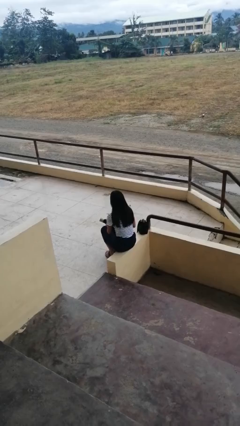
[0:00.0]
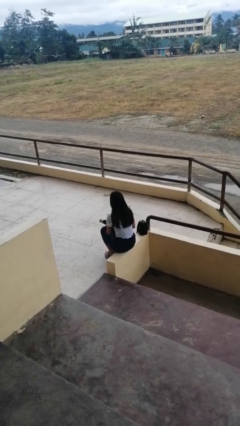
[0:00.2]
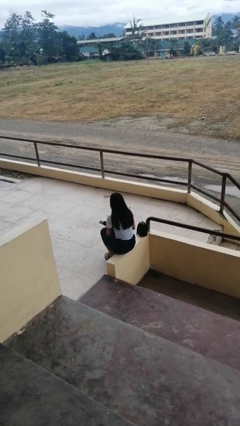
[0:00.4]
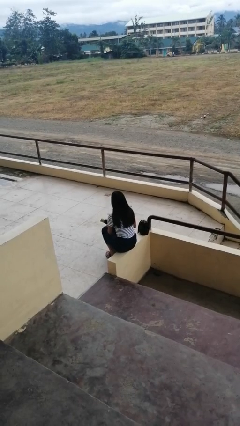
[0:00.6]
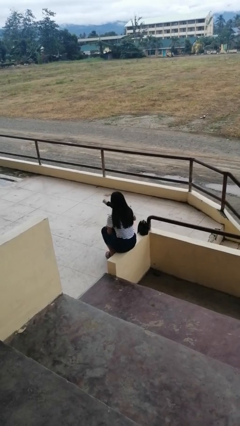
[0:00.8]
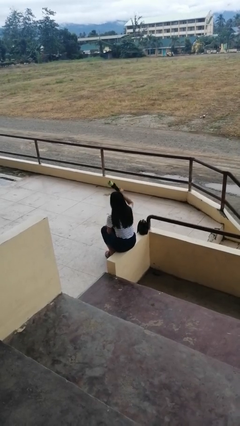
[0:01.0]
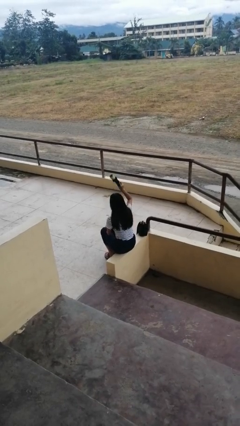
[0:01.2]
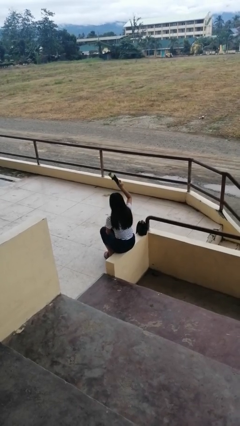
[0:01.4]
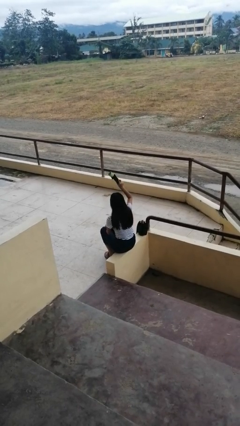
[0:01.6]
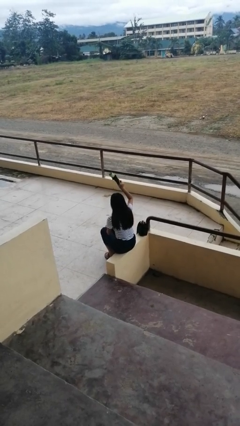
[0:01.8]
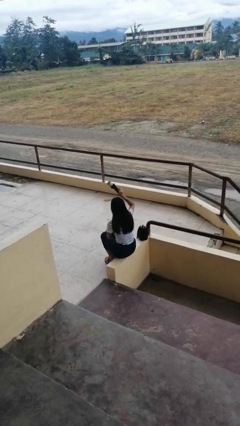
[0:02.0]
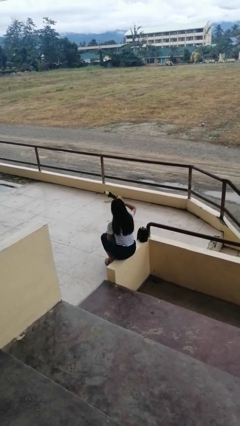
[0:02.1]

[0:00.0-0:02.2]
person holds object above head

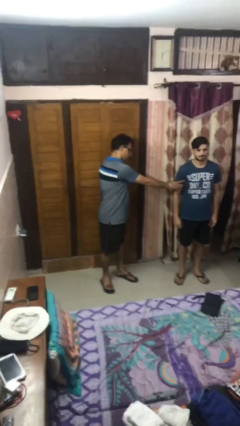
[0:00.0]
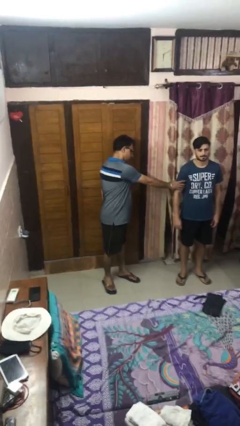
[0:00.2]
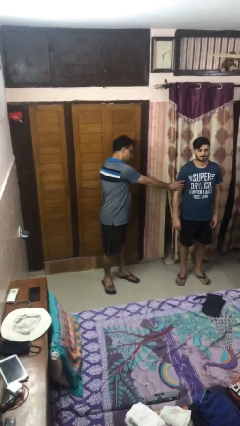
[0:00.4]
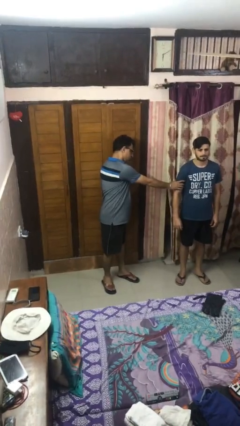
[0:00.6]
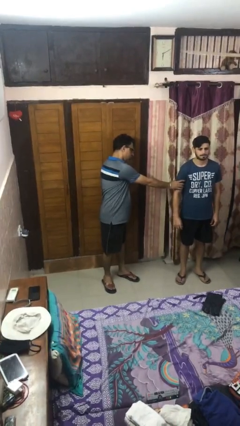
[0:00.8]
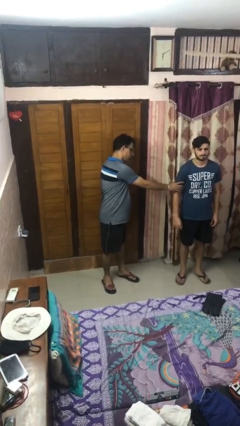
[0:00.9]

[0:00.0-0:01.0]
person grabs person by bicep

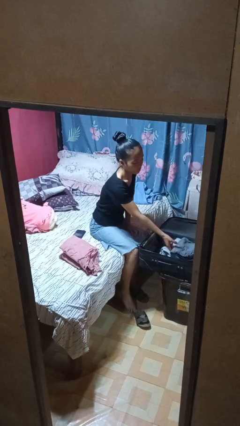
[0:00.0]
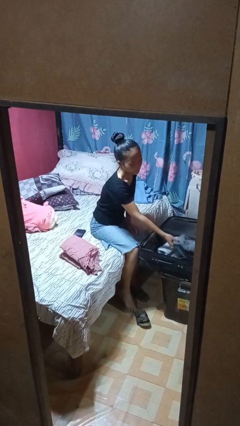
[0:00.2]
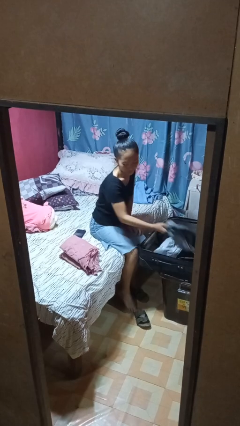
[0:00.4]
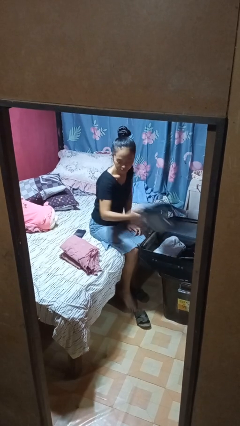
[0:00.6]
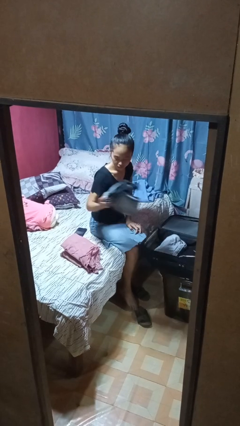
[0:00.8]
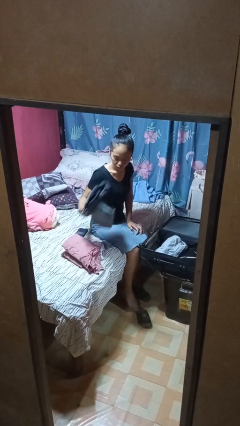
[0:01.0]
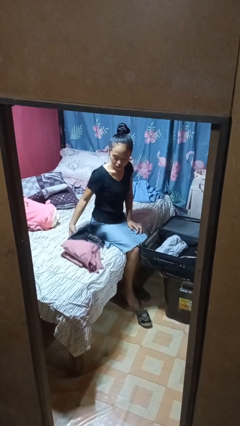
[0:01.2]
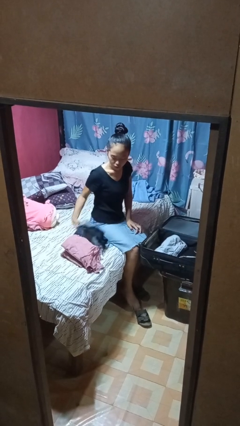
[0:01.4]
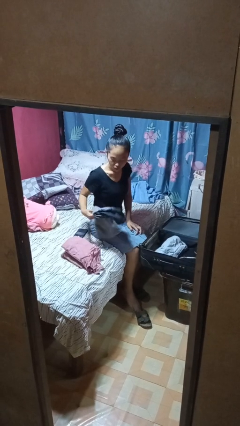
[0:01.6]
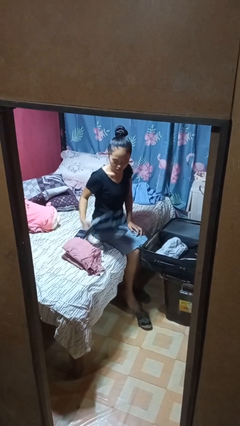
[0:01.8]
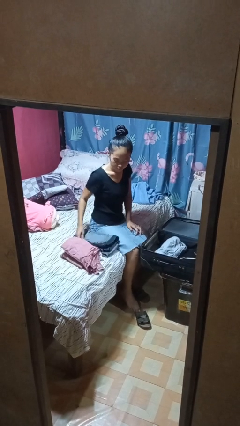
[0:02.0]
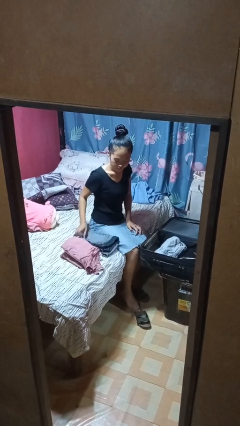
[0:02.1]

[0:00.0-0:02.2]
person unloads clothes from suitcase

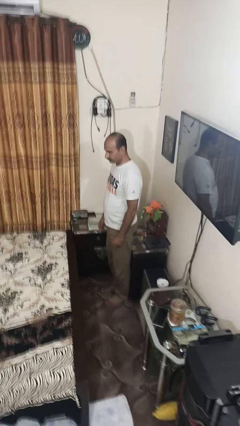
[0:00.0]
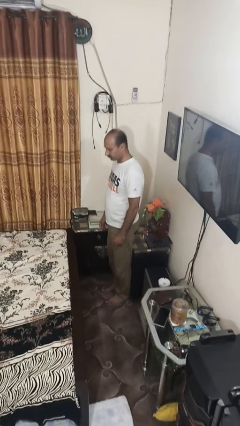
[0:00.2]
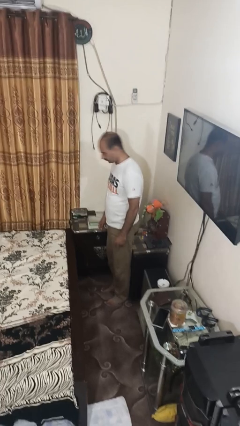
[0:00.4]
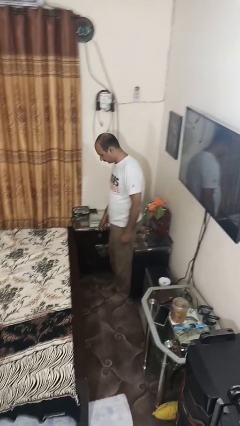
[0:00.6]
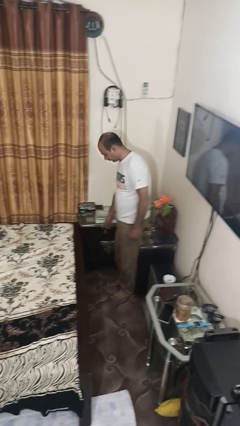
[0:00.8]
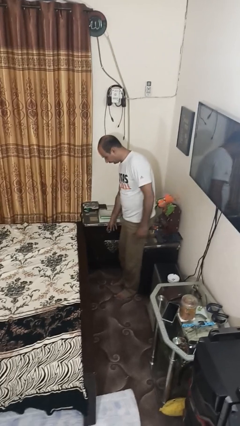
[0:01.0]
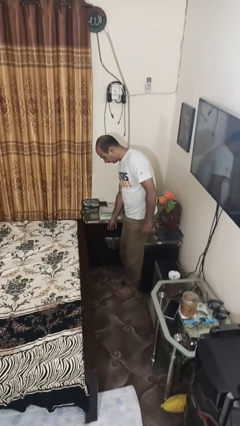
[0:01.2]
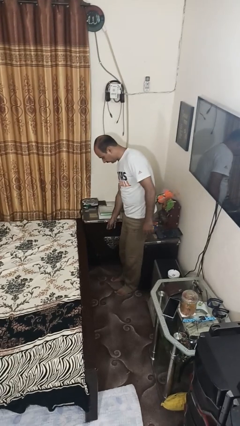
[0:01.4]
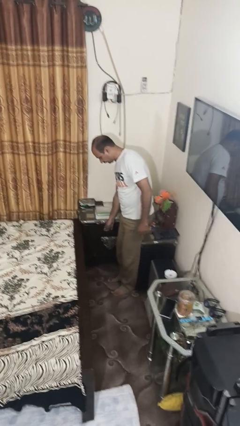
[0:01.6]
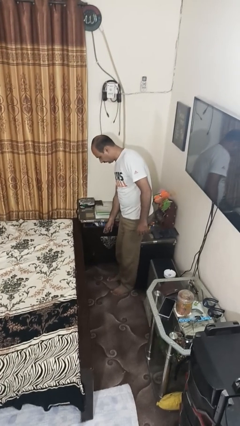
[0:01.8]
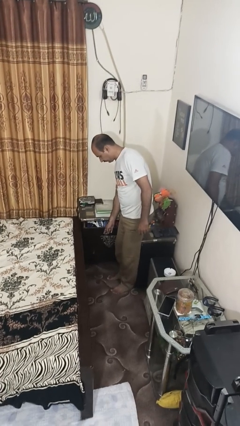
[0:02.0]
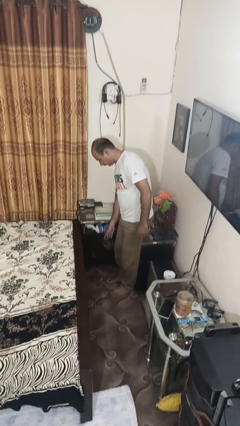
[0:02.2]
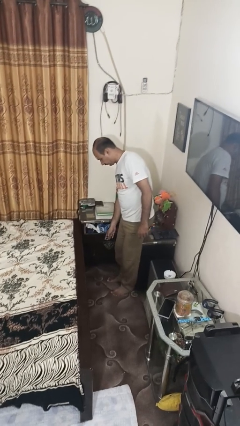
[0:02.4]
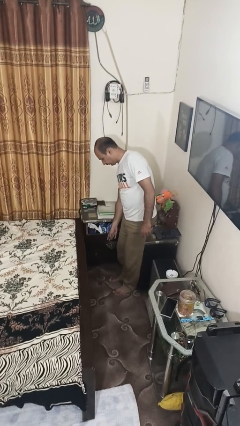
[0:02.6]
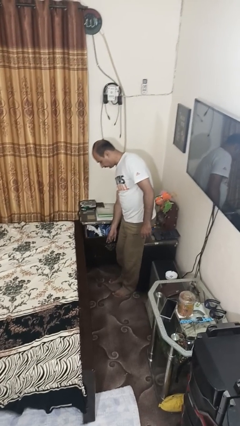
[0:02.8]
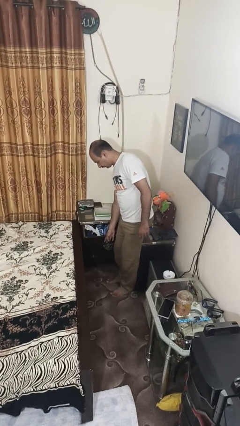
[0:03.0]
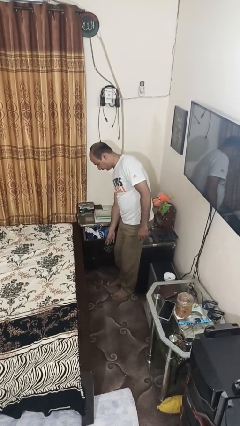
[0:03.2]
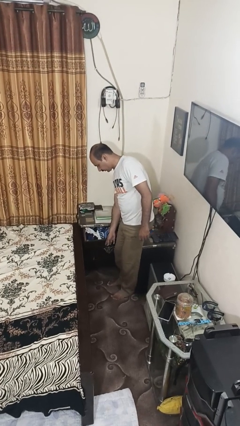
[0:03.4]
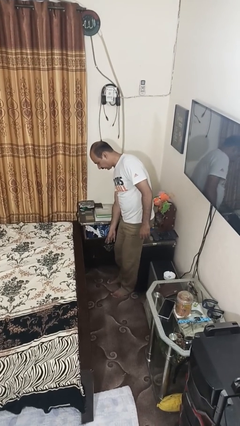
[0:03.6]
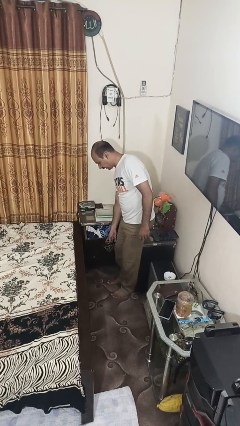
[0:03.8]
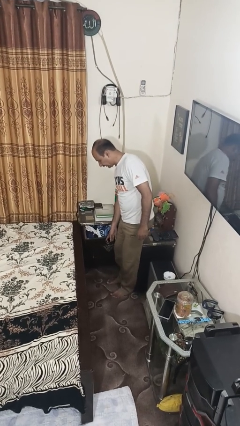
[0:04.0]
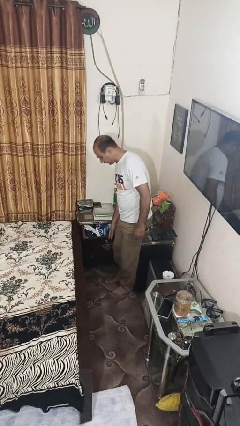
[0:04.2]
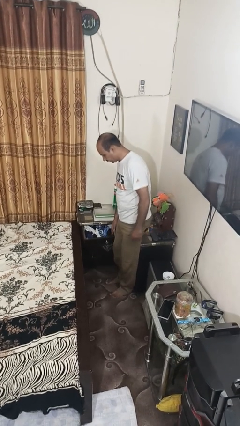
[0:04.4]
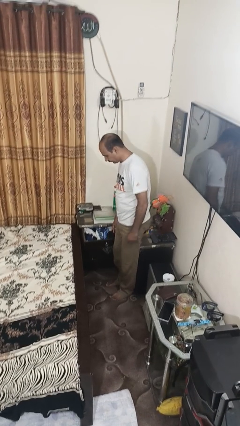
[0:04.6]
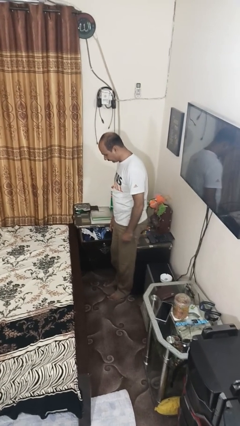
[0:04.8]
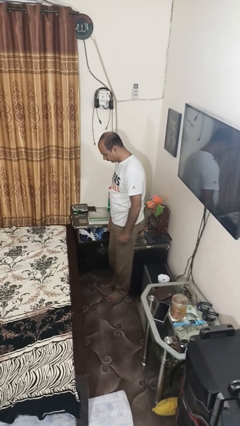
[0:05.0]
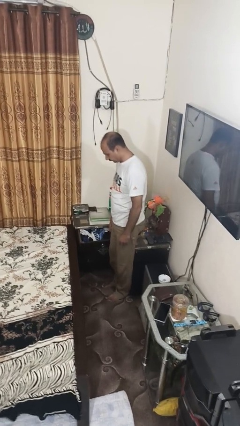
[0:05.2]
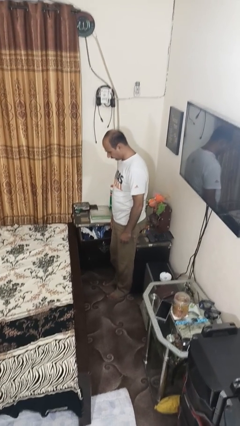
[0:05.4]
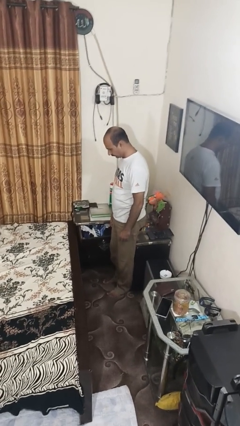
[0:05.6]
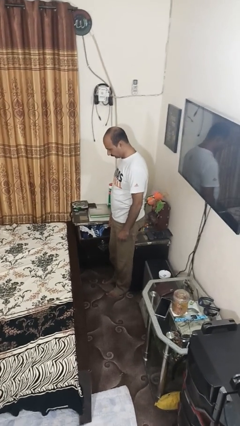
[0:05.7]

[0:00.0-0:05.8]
person opens dresser drawer

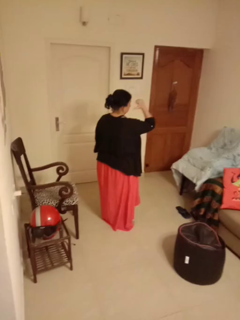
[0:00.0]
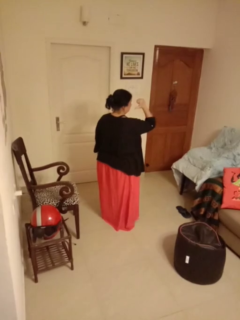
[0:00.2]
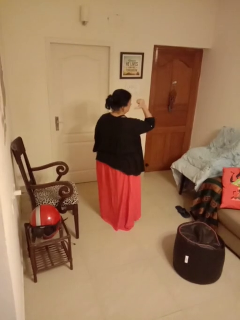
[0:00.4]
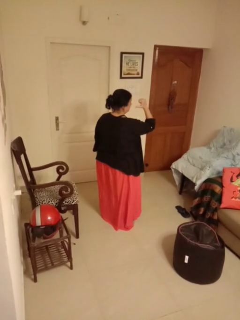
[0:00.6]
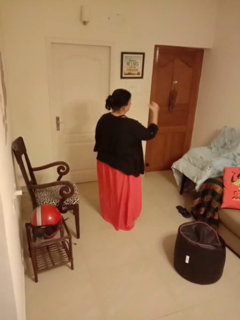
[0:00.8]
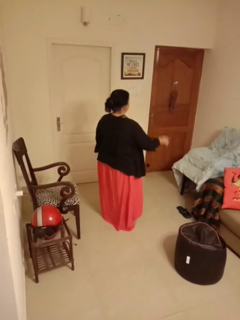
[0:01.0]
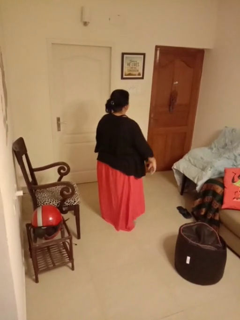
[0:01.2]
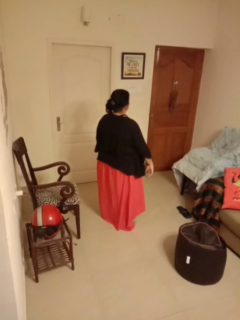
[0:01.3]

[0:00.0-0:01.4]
person gestures behind me

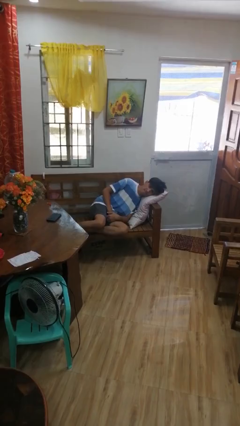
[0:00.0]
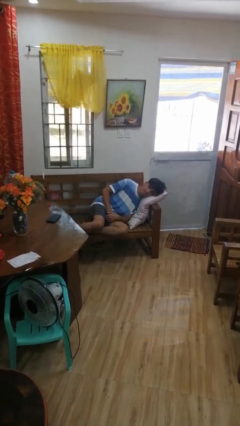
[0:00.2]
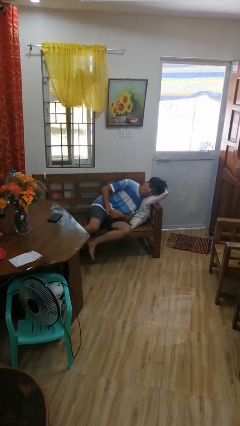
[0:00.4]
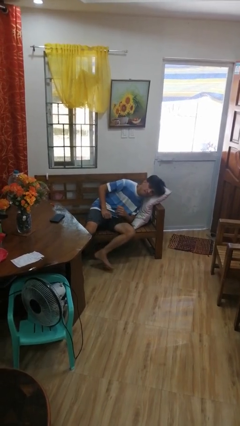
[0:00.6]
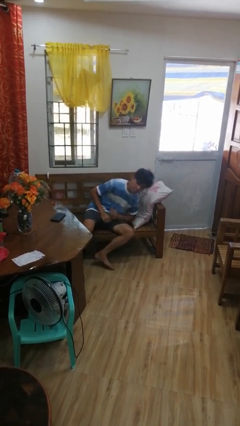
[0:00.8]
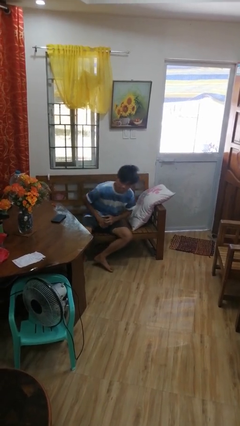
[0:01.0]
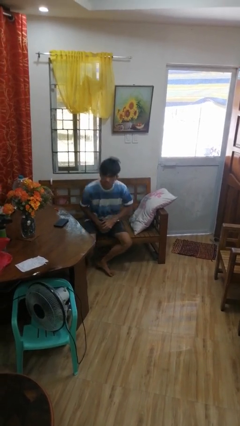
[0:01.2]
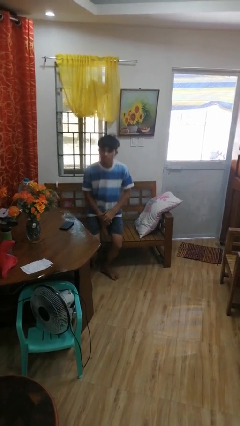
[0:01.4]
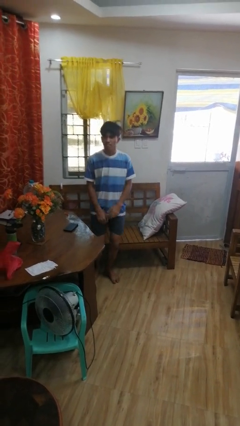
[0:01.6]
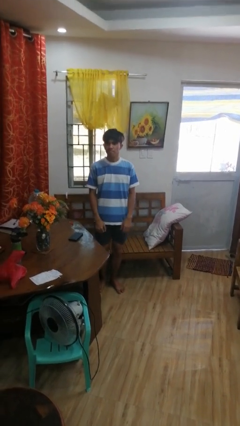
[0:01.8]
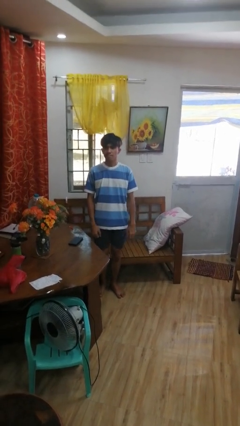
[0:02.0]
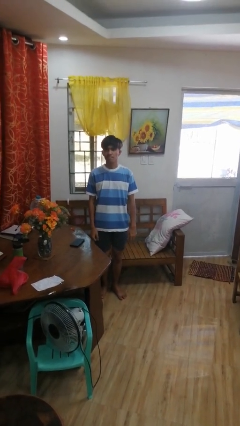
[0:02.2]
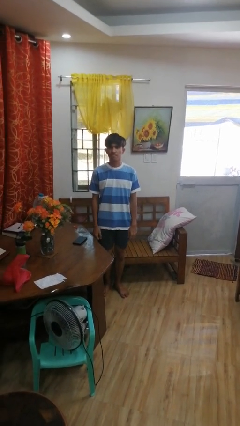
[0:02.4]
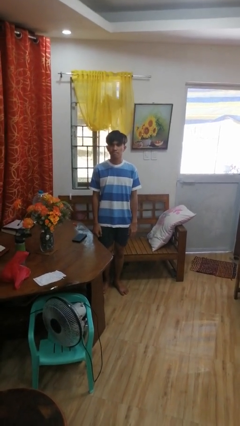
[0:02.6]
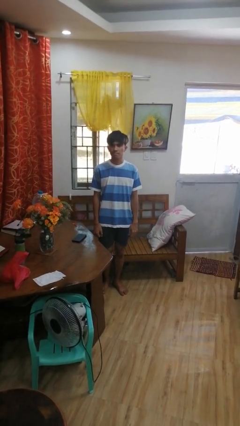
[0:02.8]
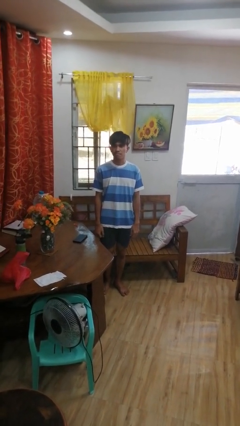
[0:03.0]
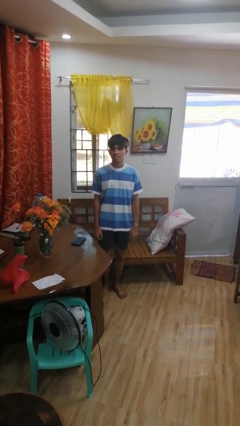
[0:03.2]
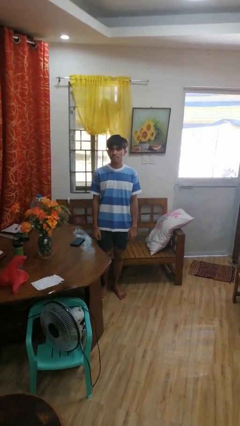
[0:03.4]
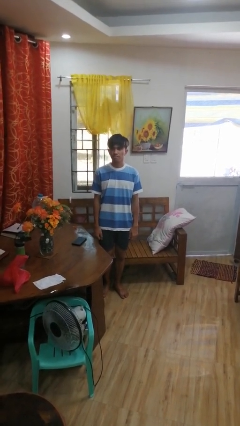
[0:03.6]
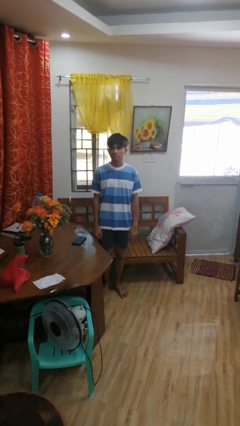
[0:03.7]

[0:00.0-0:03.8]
person stands up

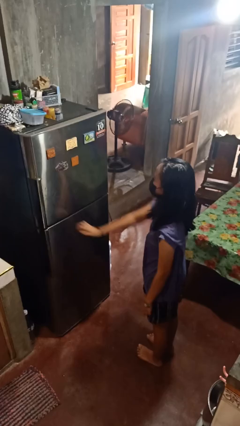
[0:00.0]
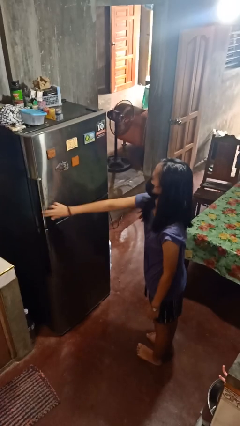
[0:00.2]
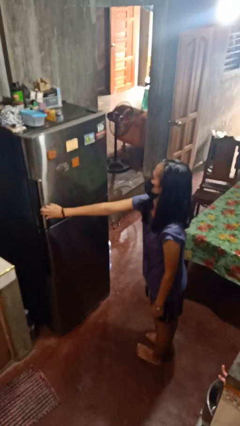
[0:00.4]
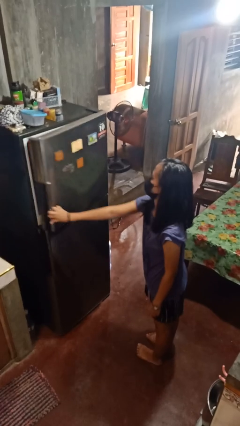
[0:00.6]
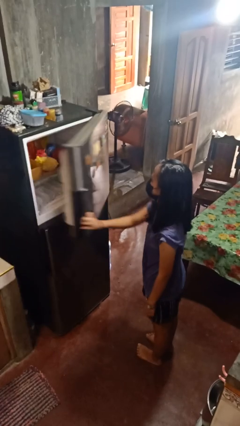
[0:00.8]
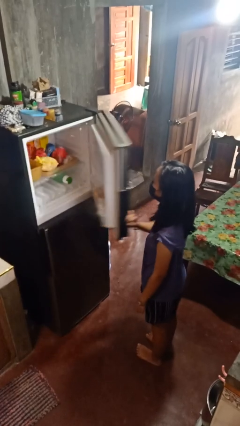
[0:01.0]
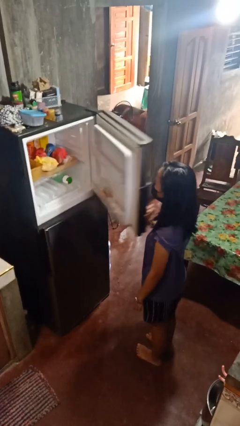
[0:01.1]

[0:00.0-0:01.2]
person opens refrigerator
